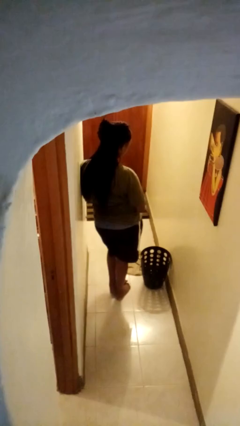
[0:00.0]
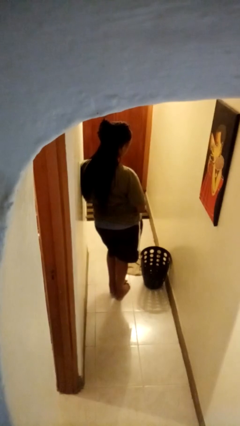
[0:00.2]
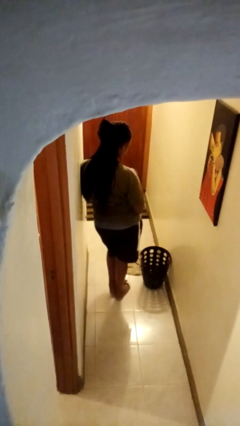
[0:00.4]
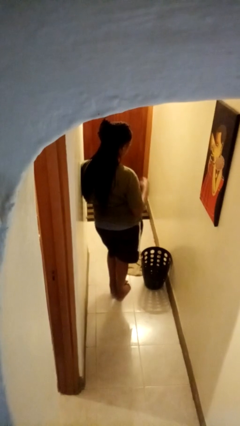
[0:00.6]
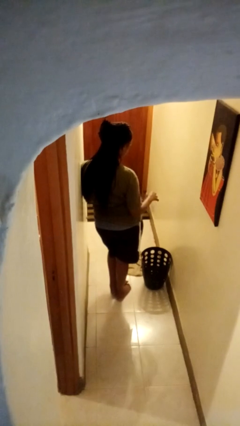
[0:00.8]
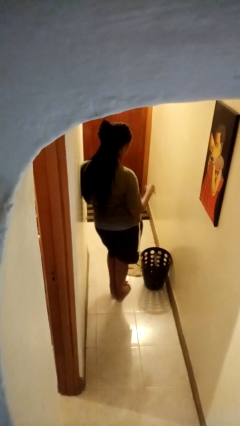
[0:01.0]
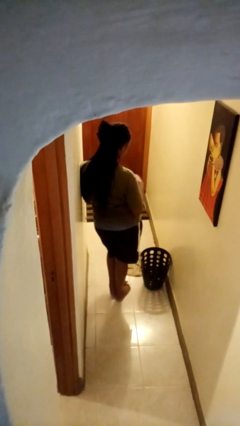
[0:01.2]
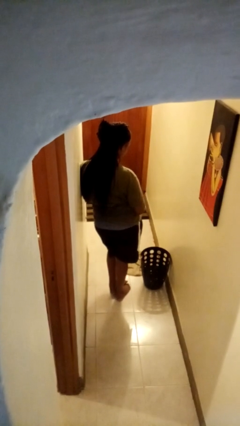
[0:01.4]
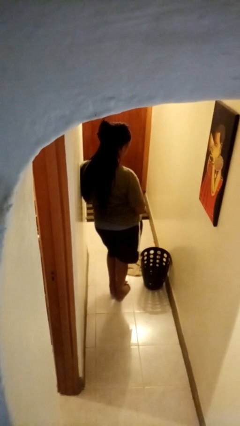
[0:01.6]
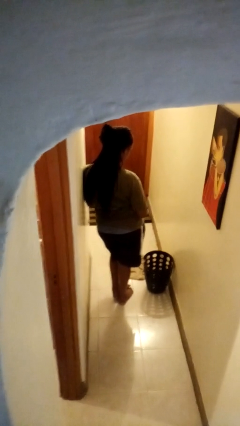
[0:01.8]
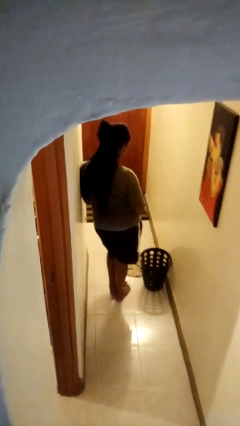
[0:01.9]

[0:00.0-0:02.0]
person discards trash

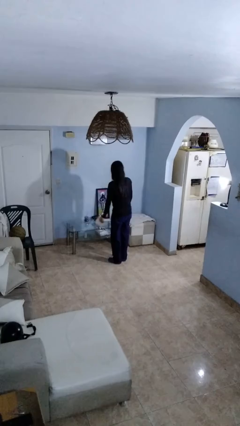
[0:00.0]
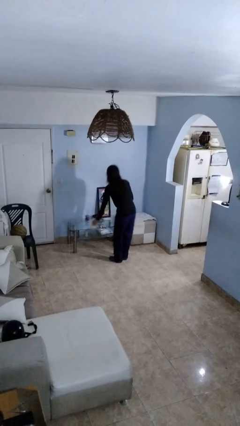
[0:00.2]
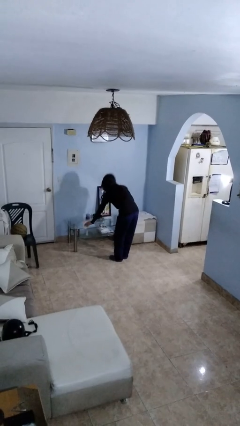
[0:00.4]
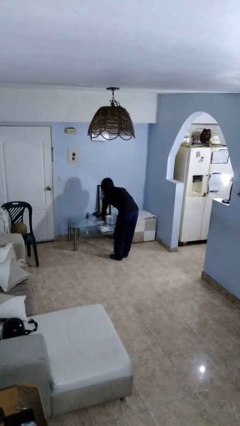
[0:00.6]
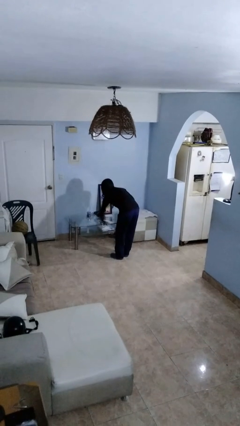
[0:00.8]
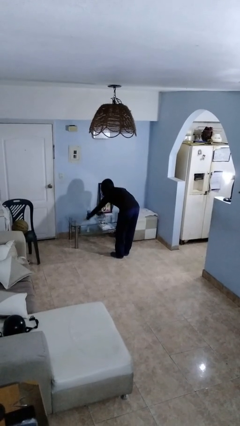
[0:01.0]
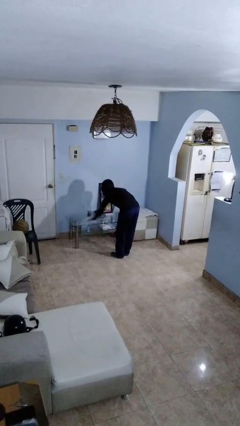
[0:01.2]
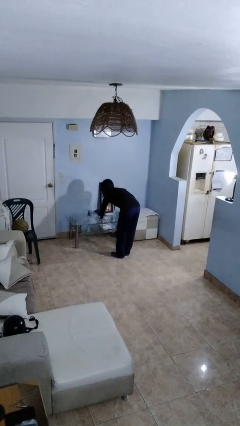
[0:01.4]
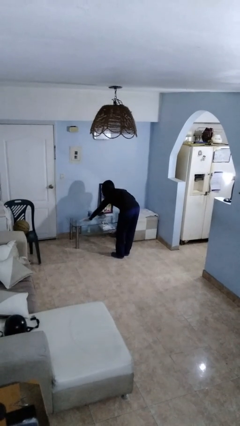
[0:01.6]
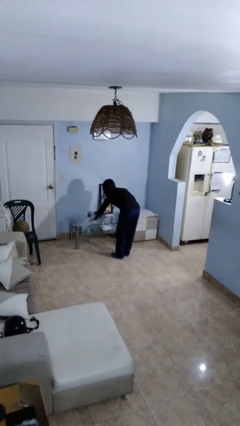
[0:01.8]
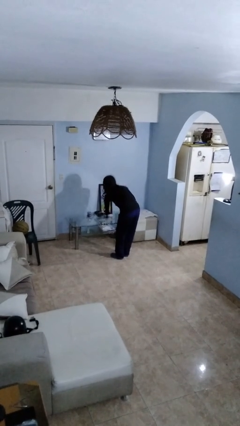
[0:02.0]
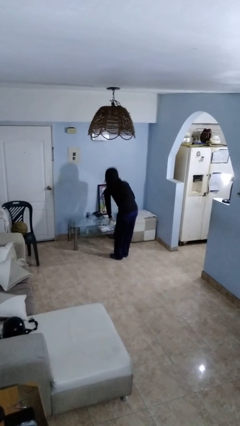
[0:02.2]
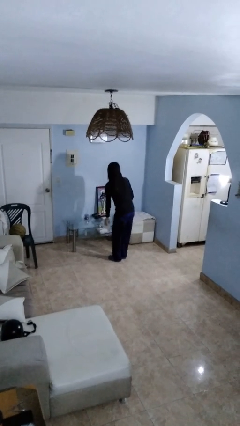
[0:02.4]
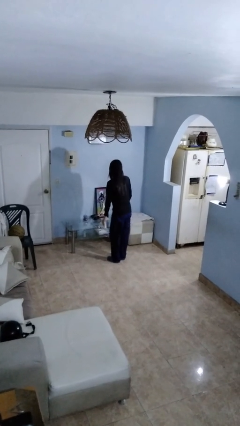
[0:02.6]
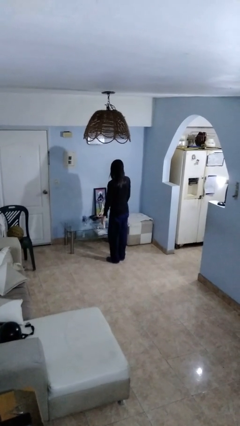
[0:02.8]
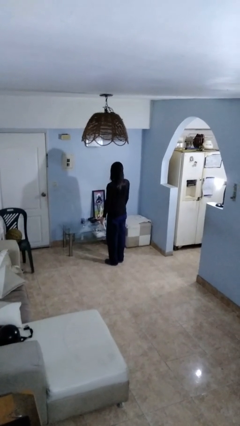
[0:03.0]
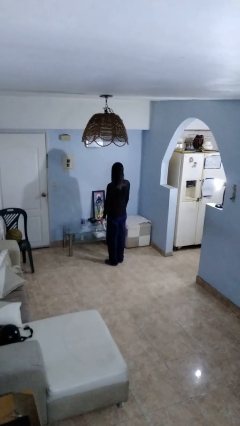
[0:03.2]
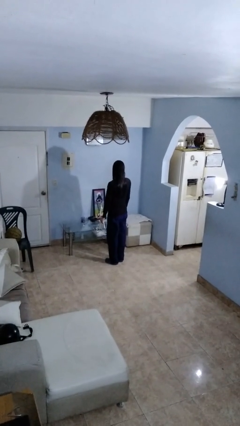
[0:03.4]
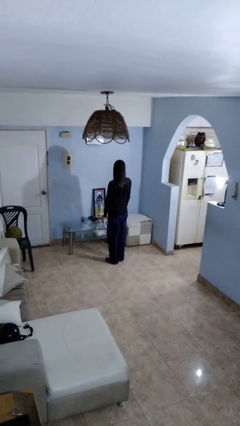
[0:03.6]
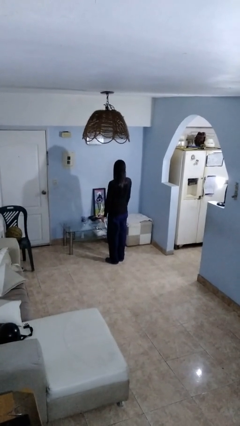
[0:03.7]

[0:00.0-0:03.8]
person cleans table with rag

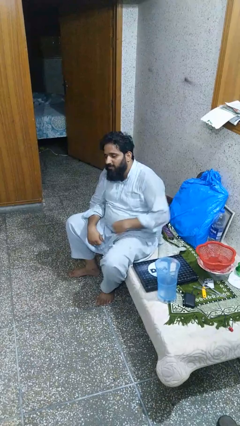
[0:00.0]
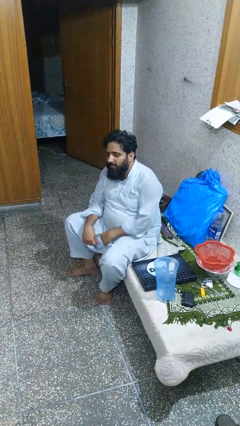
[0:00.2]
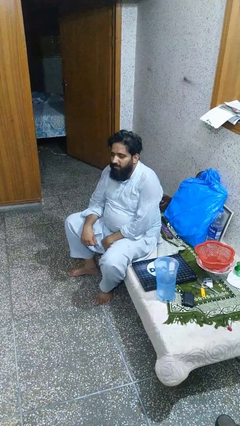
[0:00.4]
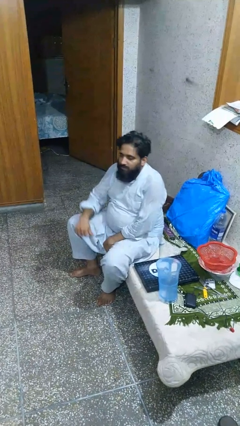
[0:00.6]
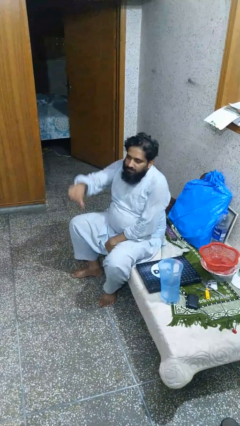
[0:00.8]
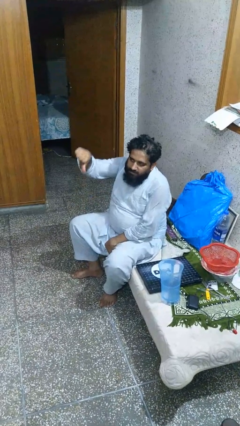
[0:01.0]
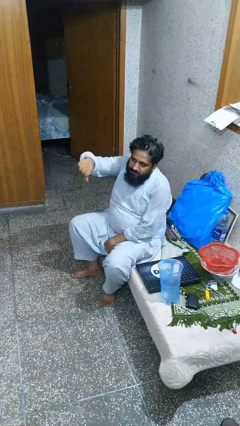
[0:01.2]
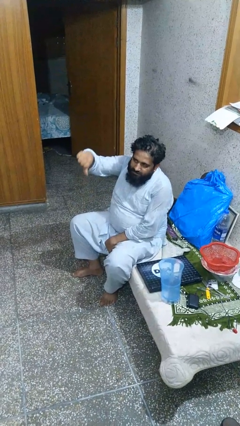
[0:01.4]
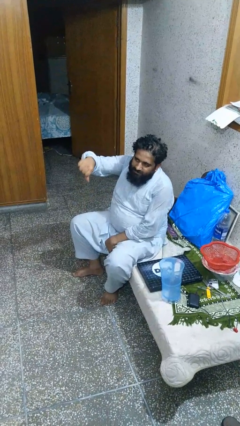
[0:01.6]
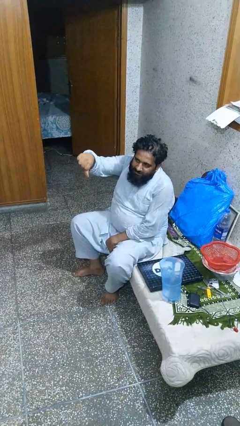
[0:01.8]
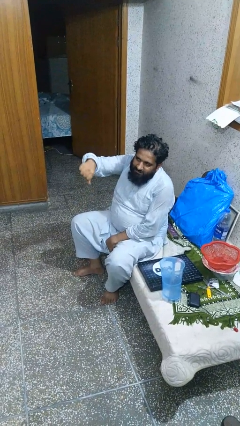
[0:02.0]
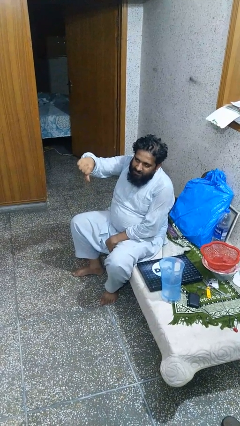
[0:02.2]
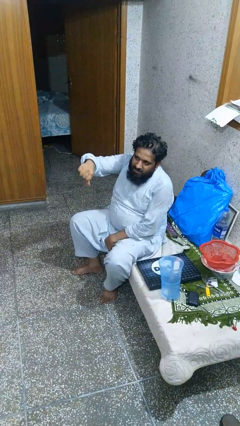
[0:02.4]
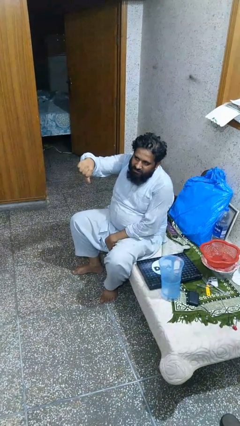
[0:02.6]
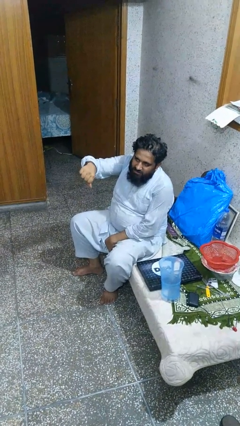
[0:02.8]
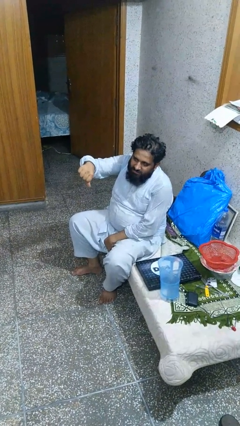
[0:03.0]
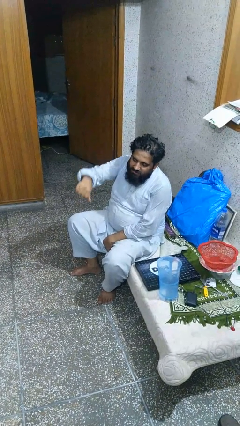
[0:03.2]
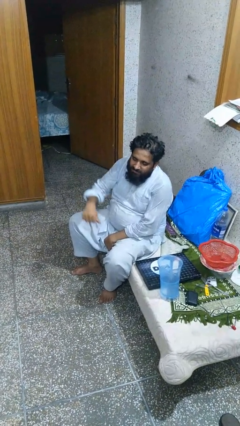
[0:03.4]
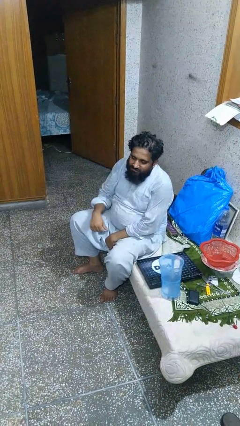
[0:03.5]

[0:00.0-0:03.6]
person gestures thumbs down

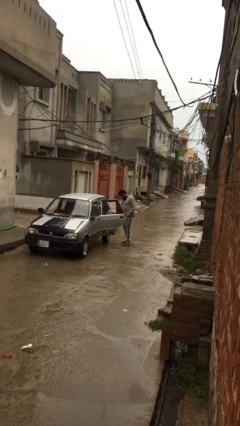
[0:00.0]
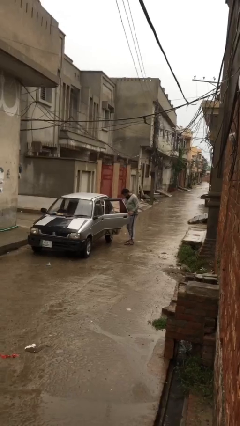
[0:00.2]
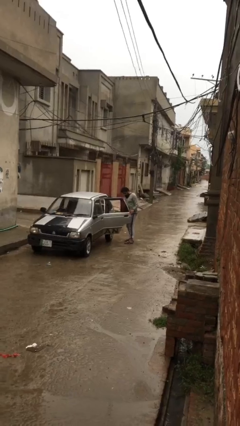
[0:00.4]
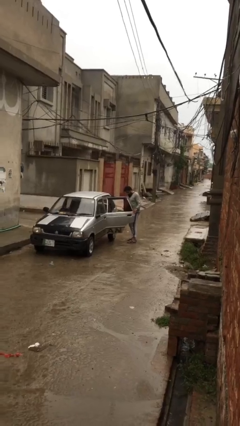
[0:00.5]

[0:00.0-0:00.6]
person opens car door

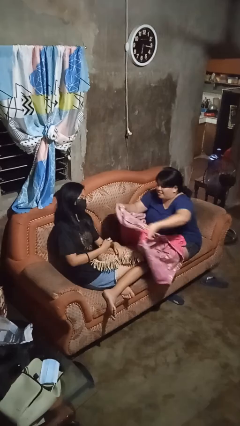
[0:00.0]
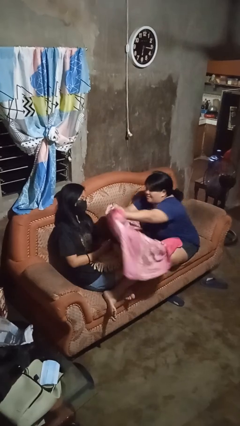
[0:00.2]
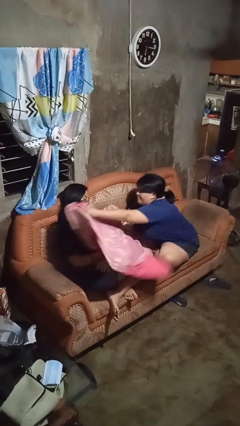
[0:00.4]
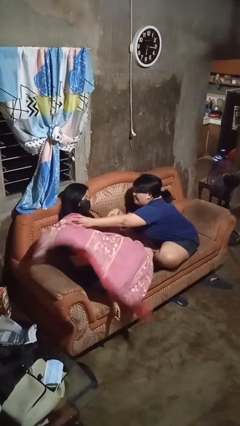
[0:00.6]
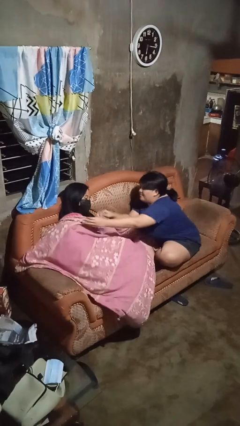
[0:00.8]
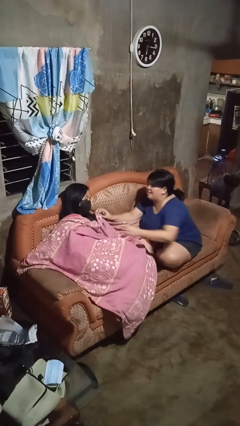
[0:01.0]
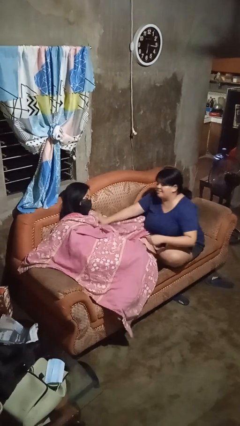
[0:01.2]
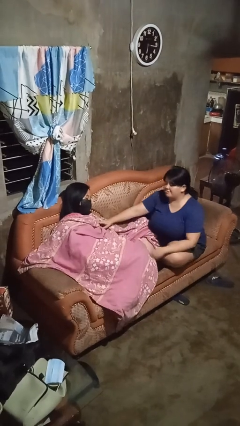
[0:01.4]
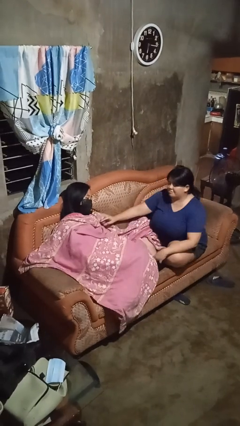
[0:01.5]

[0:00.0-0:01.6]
person covers friend with blanket

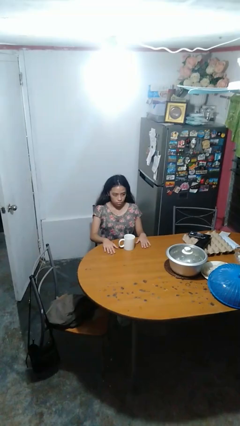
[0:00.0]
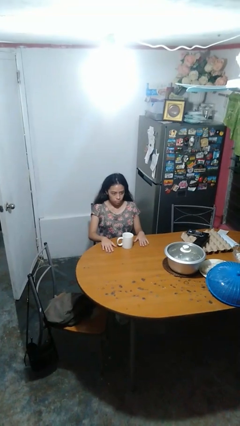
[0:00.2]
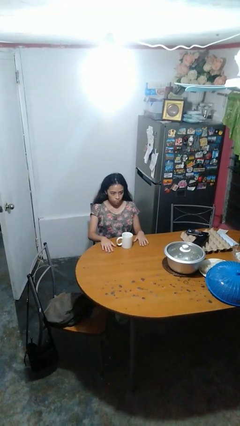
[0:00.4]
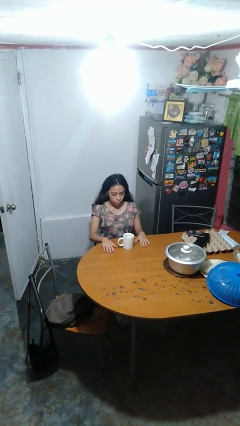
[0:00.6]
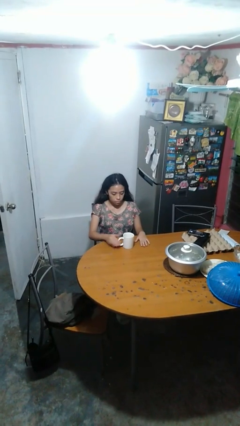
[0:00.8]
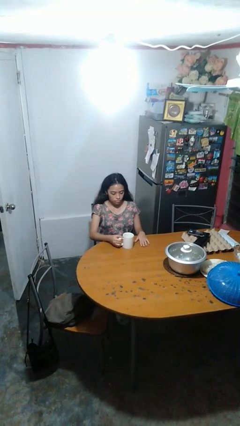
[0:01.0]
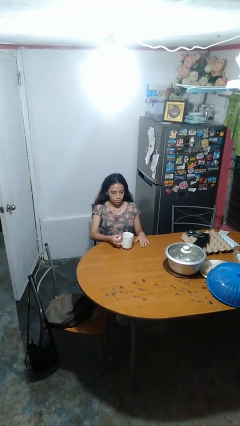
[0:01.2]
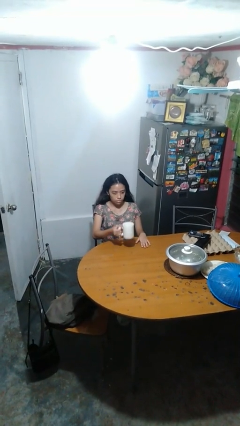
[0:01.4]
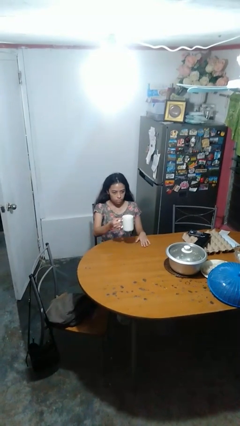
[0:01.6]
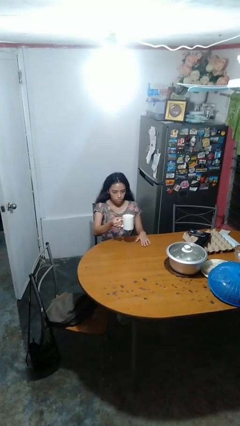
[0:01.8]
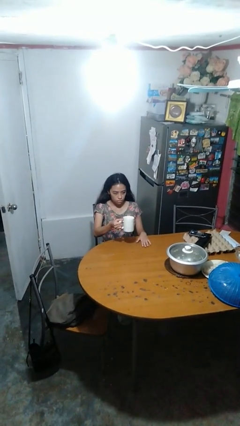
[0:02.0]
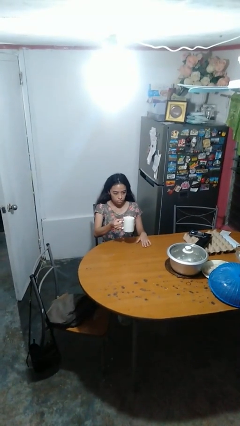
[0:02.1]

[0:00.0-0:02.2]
person picks up object from table

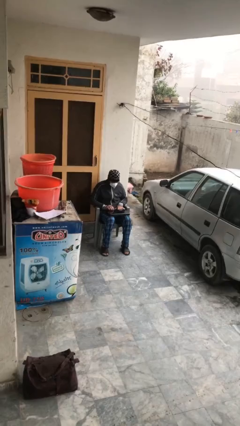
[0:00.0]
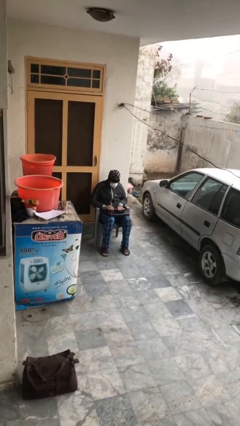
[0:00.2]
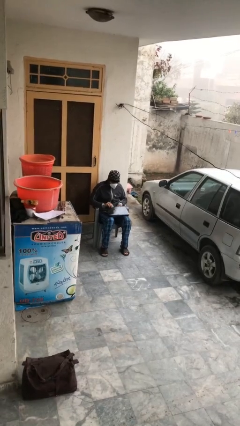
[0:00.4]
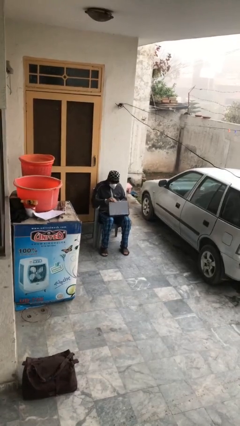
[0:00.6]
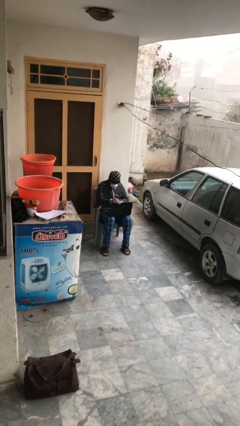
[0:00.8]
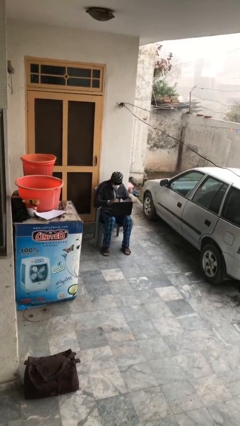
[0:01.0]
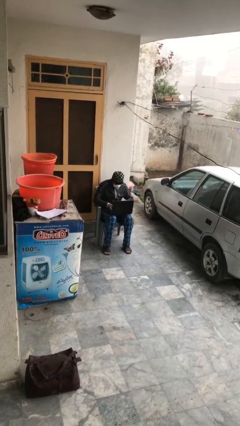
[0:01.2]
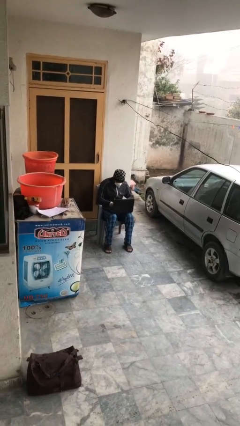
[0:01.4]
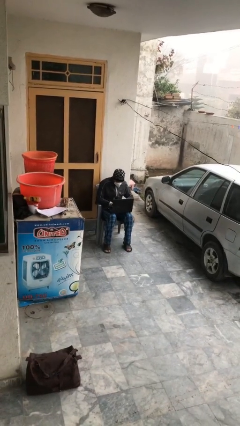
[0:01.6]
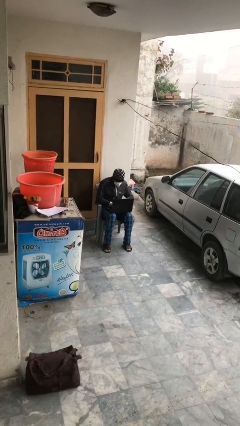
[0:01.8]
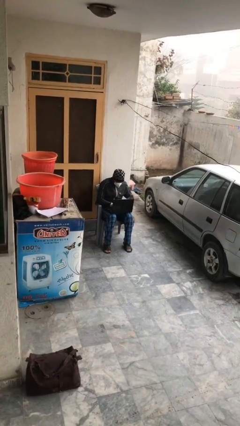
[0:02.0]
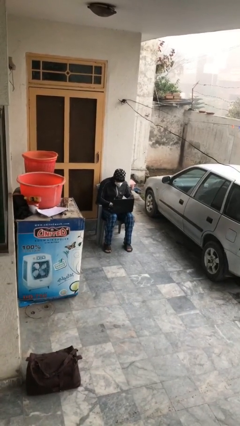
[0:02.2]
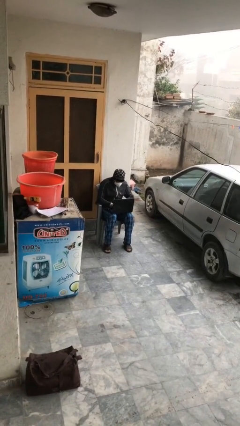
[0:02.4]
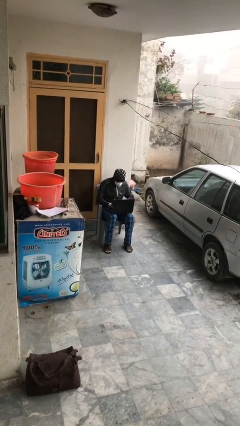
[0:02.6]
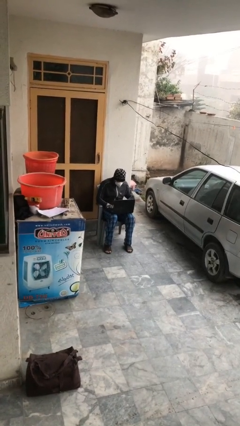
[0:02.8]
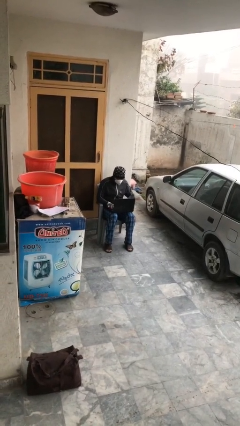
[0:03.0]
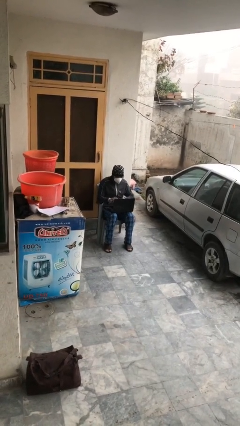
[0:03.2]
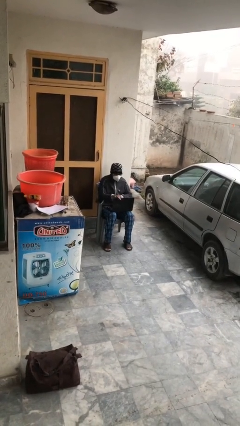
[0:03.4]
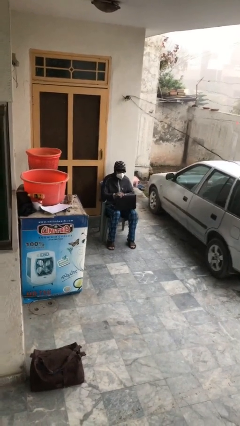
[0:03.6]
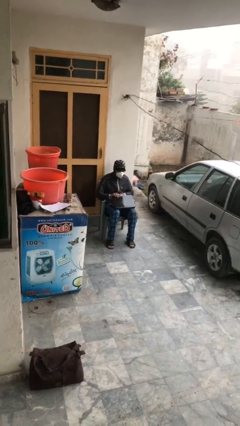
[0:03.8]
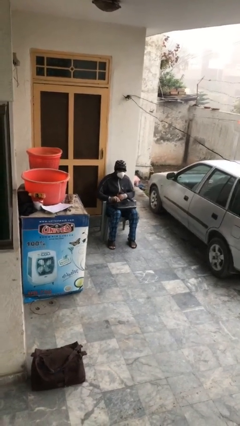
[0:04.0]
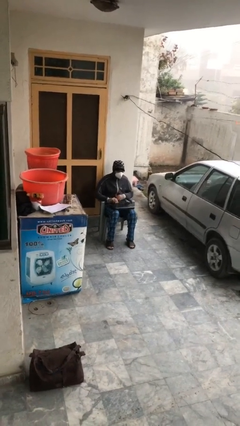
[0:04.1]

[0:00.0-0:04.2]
person interacts with laptop
